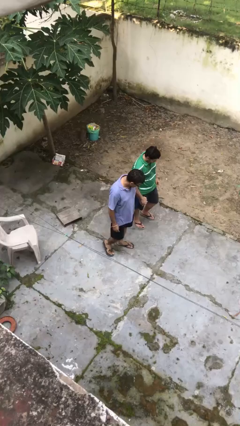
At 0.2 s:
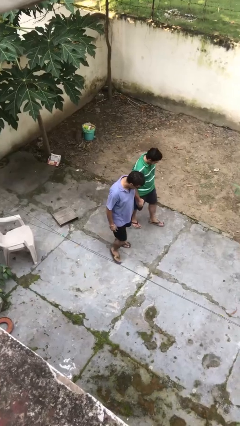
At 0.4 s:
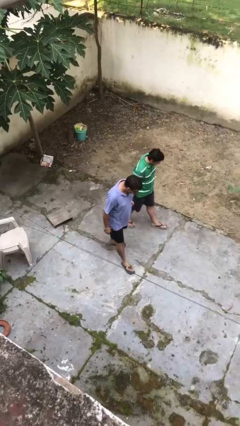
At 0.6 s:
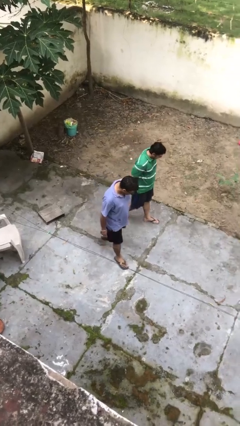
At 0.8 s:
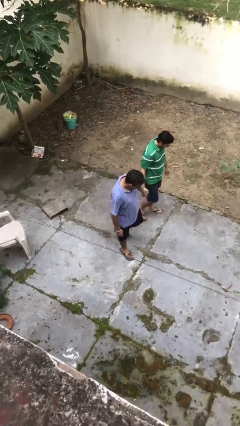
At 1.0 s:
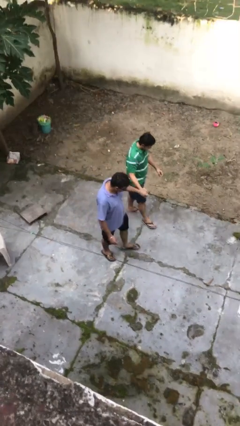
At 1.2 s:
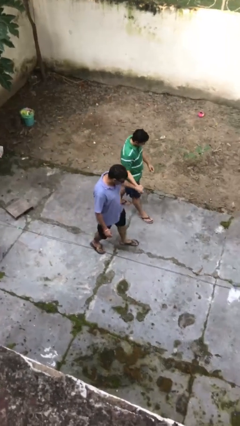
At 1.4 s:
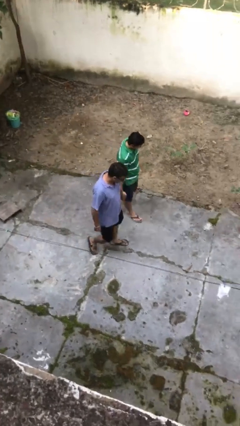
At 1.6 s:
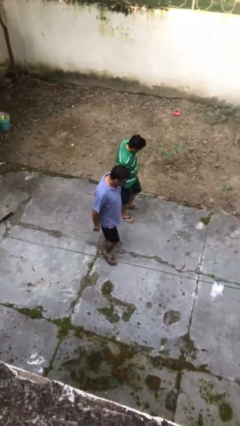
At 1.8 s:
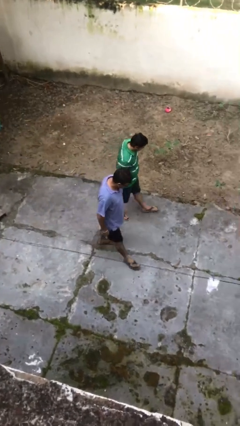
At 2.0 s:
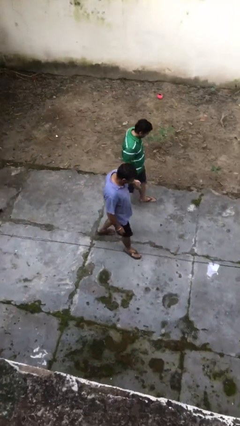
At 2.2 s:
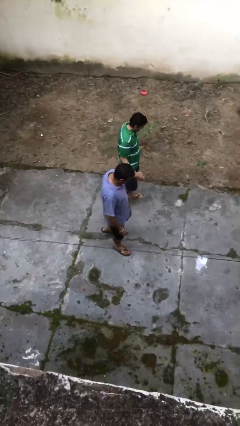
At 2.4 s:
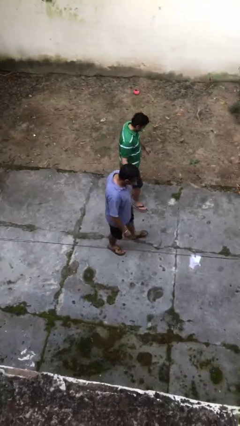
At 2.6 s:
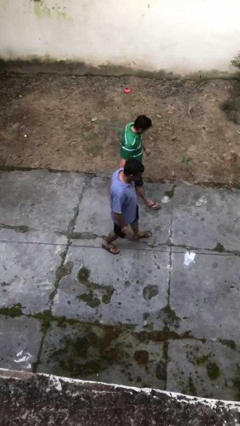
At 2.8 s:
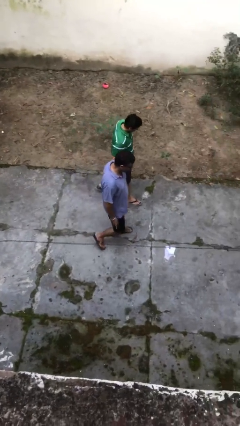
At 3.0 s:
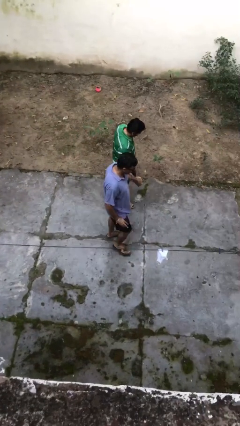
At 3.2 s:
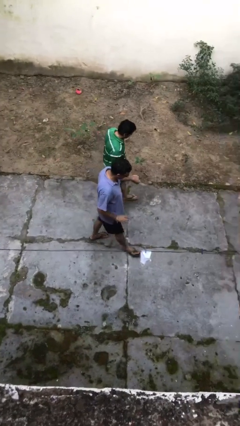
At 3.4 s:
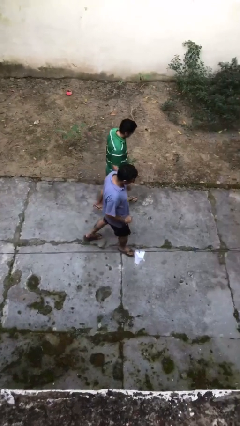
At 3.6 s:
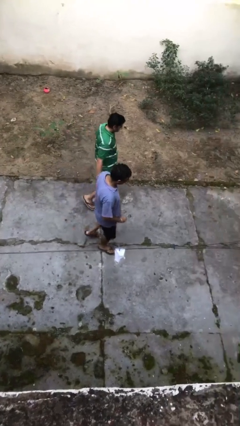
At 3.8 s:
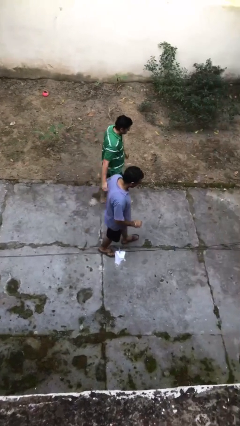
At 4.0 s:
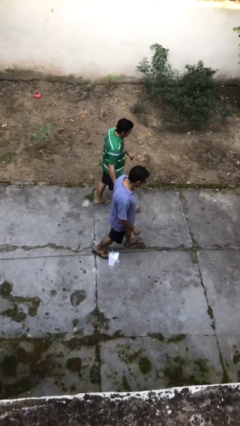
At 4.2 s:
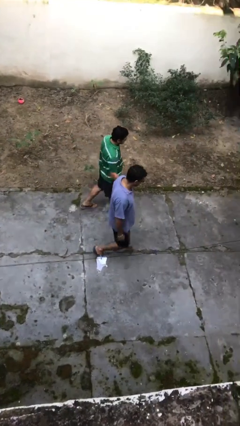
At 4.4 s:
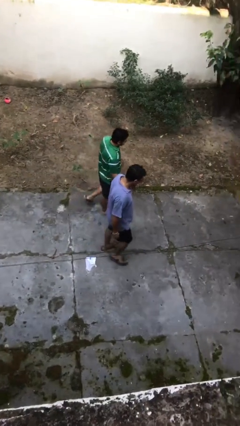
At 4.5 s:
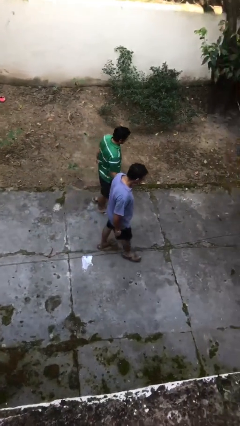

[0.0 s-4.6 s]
person holds hand

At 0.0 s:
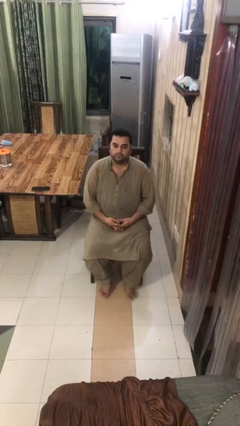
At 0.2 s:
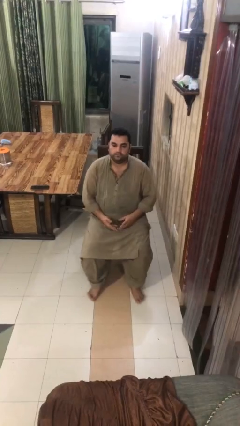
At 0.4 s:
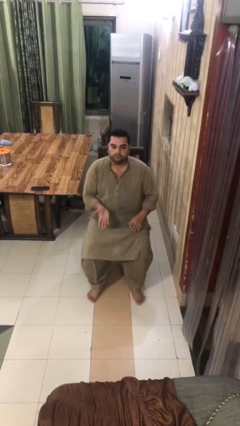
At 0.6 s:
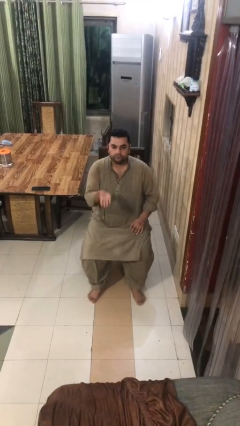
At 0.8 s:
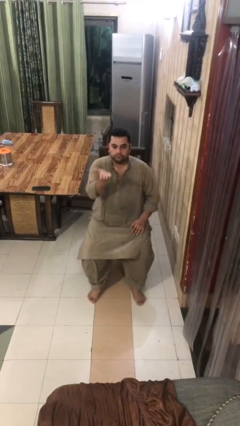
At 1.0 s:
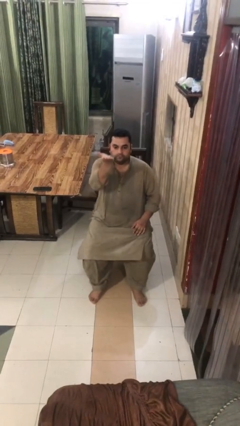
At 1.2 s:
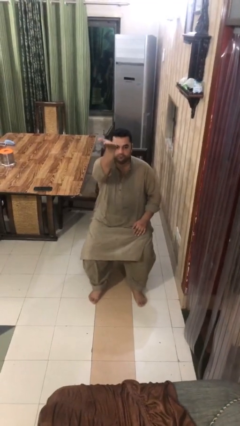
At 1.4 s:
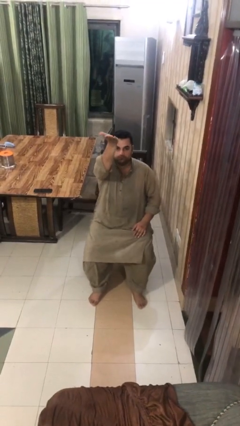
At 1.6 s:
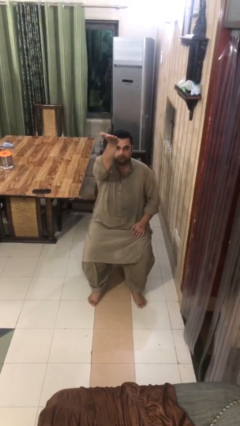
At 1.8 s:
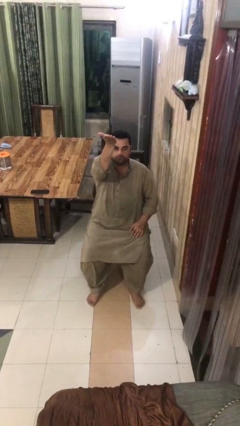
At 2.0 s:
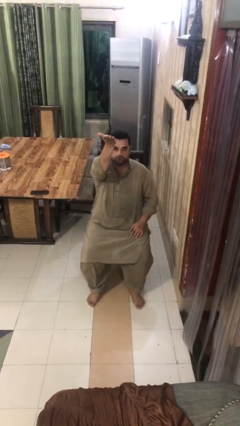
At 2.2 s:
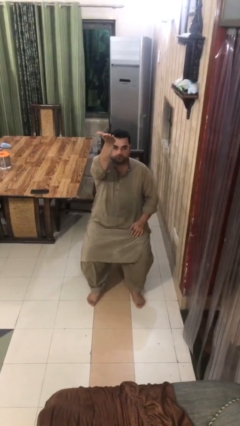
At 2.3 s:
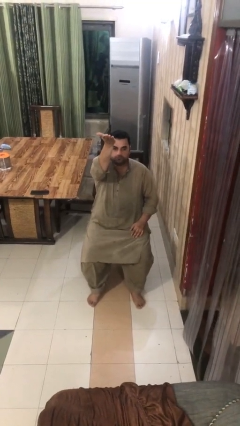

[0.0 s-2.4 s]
person gestures swipe up

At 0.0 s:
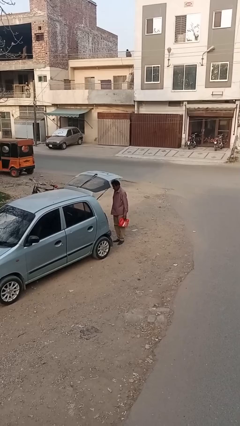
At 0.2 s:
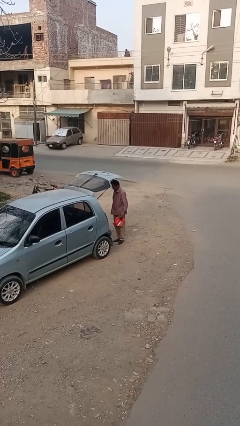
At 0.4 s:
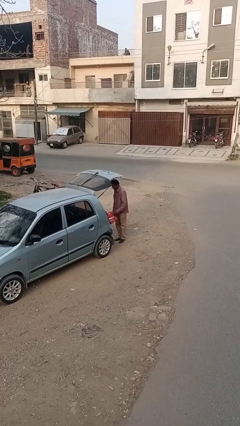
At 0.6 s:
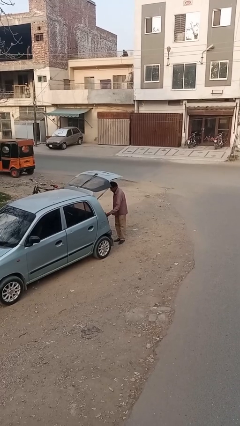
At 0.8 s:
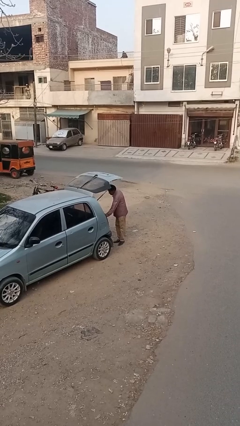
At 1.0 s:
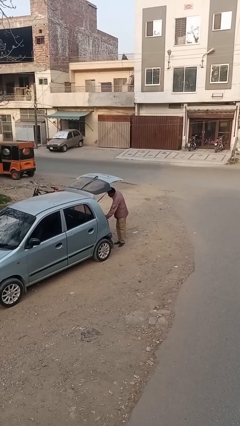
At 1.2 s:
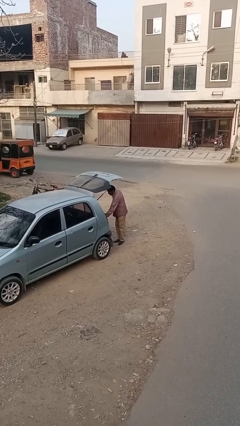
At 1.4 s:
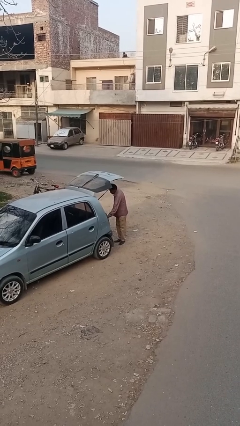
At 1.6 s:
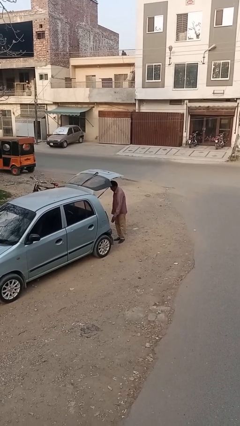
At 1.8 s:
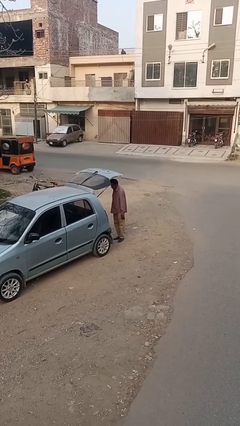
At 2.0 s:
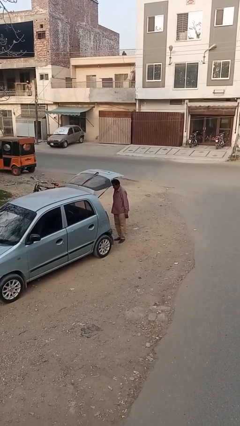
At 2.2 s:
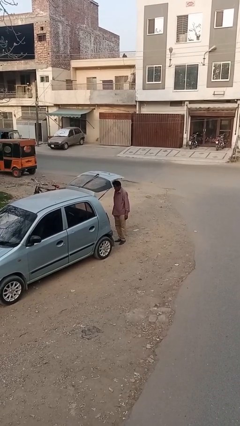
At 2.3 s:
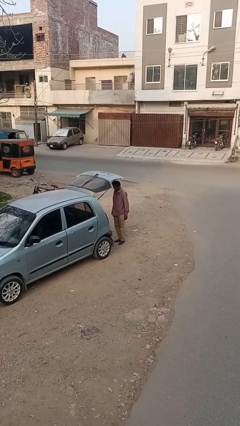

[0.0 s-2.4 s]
person loads car

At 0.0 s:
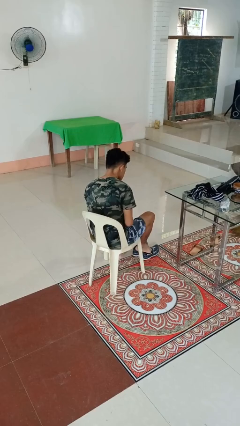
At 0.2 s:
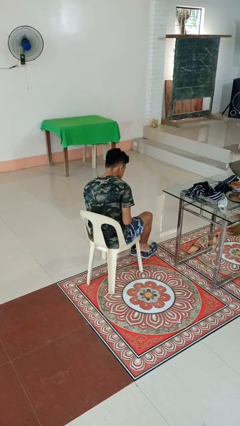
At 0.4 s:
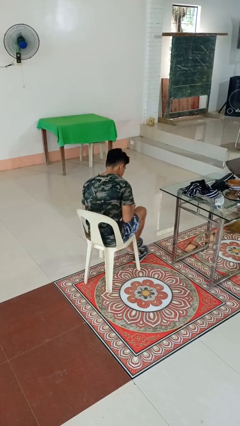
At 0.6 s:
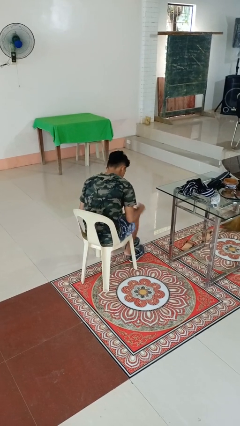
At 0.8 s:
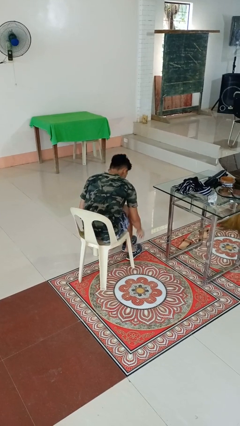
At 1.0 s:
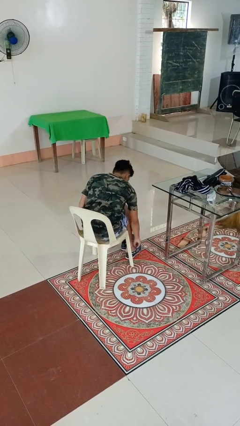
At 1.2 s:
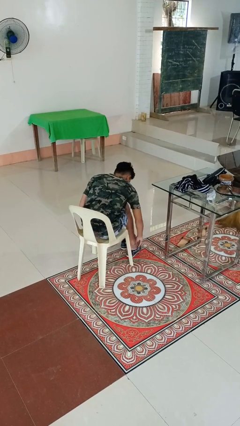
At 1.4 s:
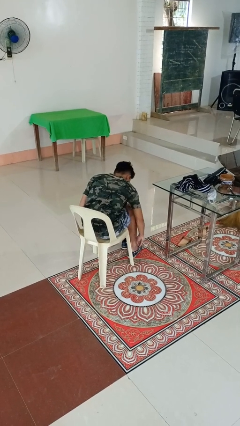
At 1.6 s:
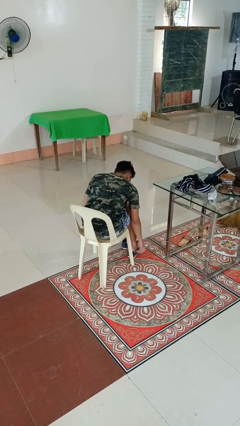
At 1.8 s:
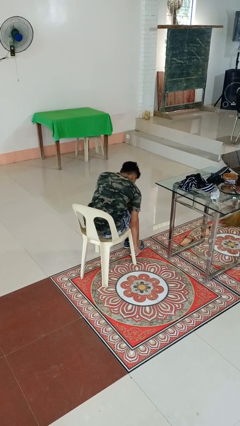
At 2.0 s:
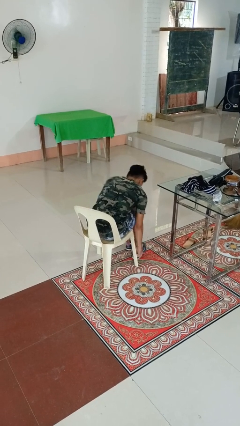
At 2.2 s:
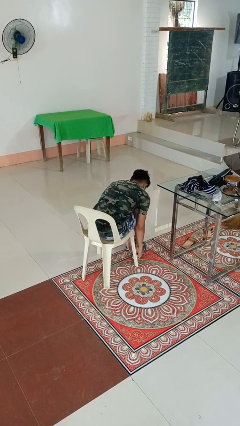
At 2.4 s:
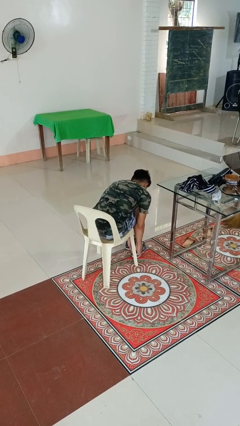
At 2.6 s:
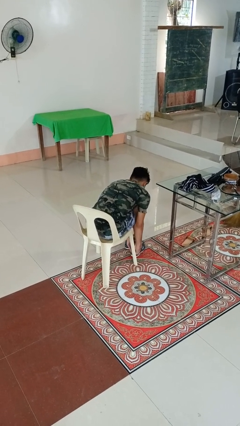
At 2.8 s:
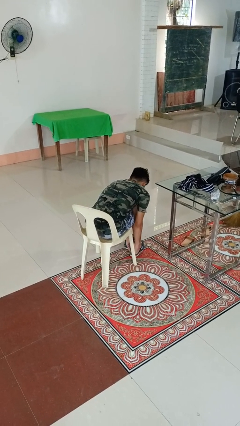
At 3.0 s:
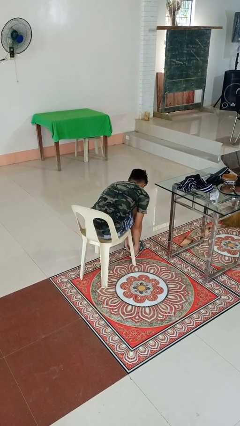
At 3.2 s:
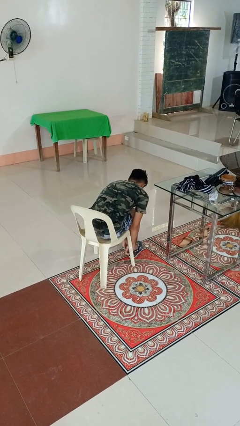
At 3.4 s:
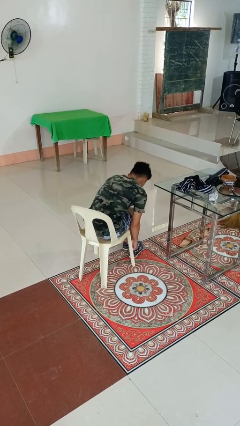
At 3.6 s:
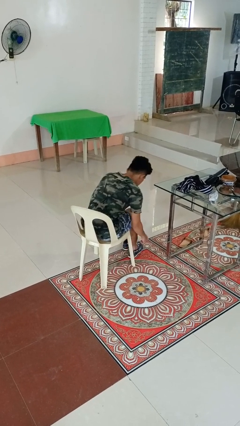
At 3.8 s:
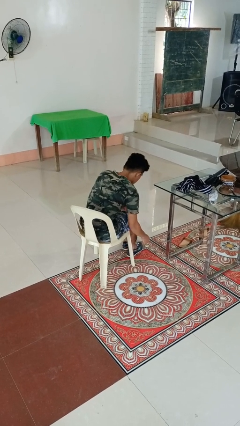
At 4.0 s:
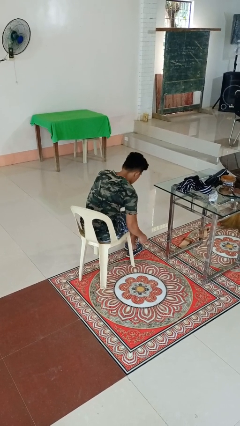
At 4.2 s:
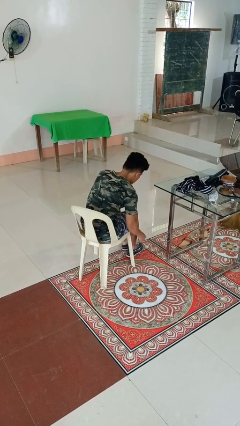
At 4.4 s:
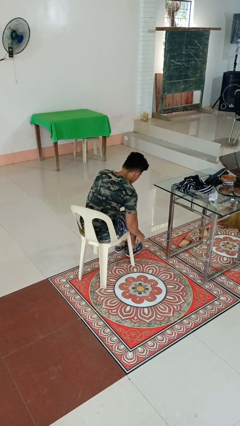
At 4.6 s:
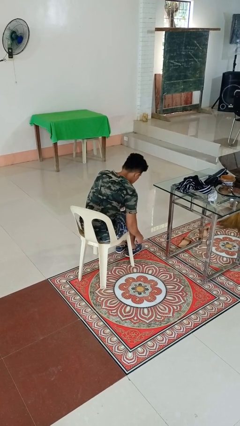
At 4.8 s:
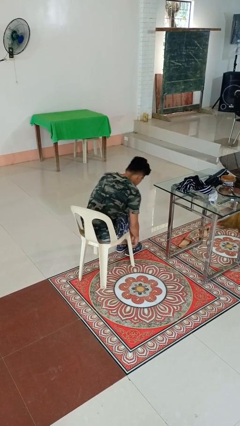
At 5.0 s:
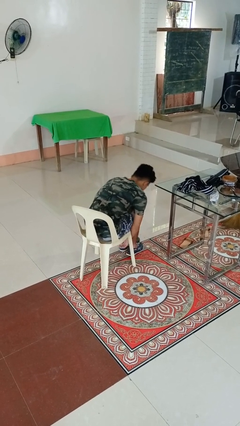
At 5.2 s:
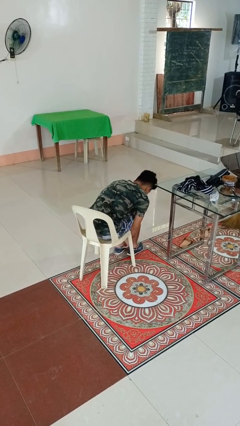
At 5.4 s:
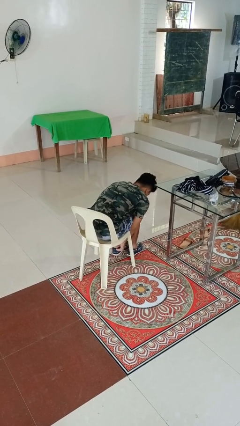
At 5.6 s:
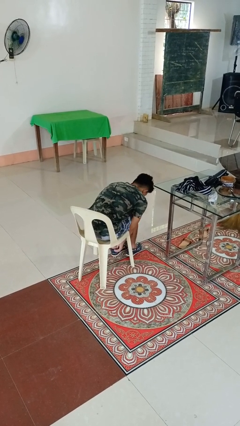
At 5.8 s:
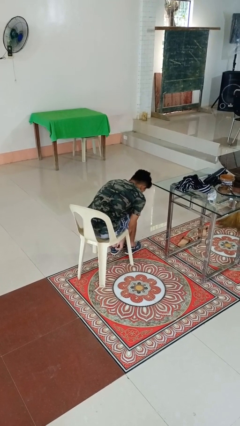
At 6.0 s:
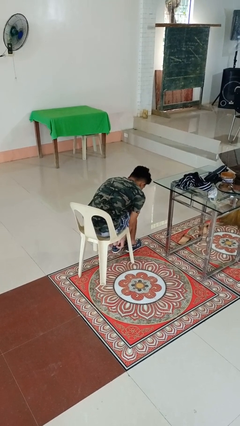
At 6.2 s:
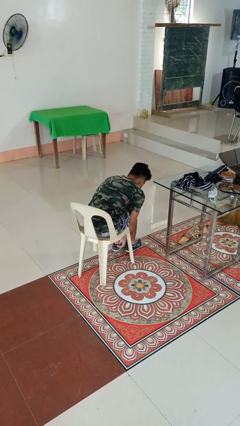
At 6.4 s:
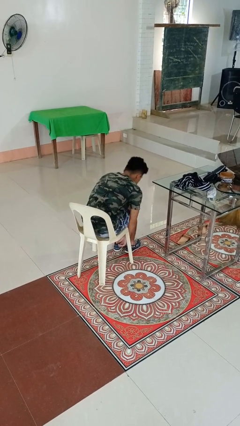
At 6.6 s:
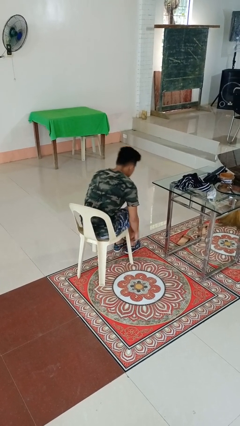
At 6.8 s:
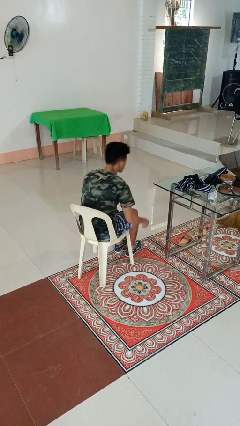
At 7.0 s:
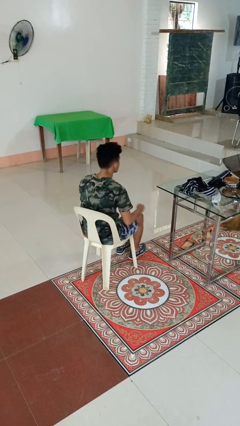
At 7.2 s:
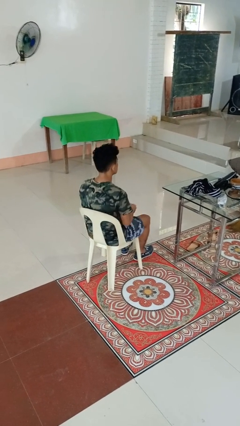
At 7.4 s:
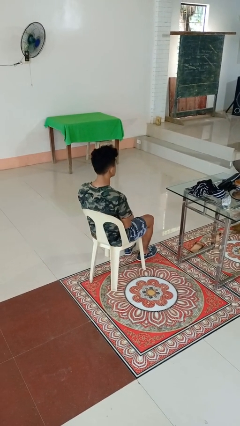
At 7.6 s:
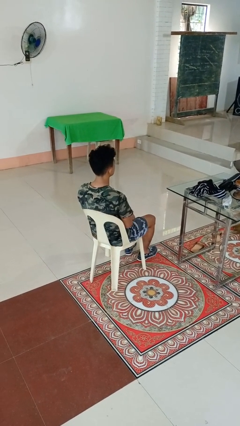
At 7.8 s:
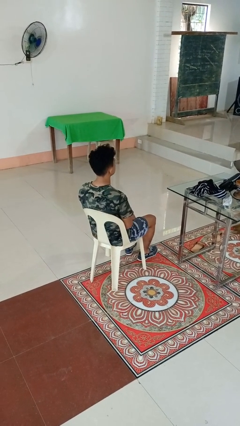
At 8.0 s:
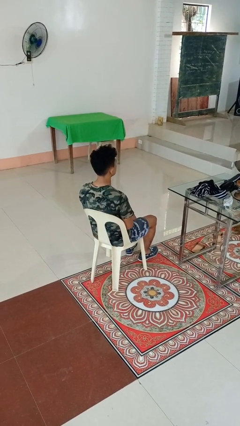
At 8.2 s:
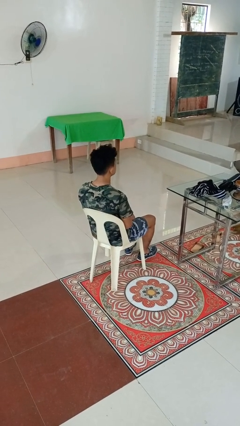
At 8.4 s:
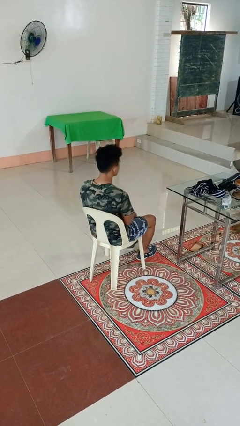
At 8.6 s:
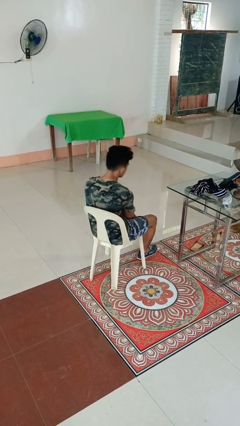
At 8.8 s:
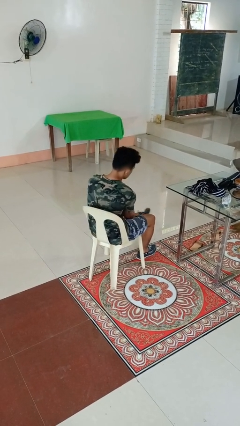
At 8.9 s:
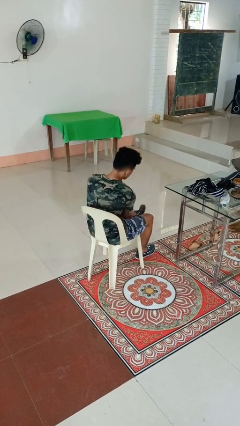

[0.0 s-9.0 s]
person puts on shoes
